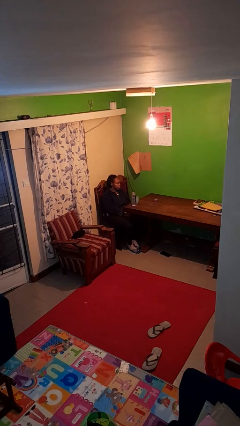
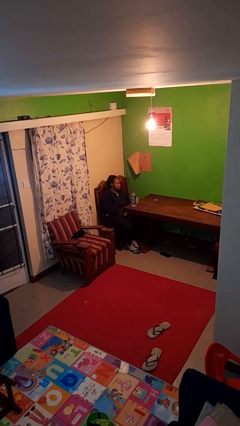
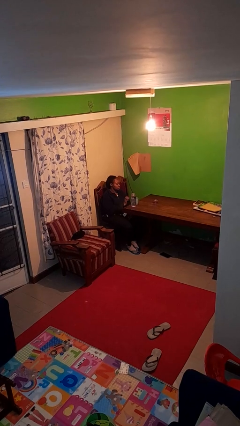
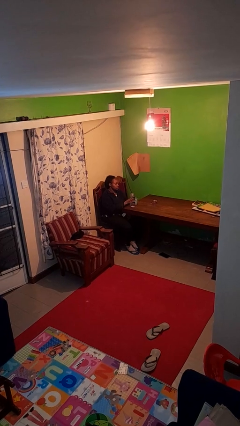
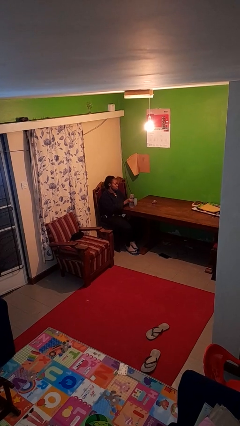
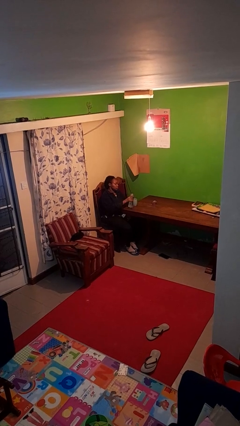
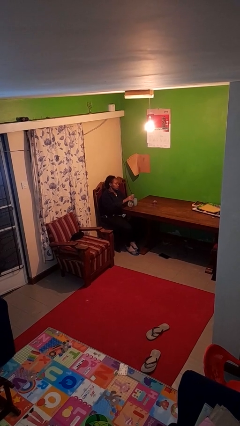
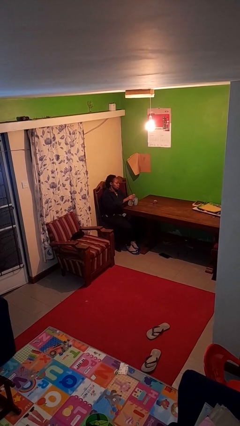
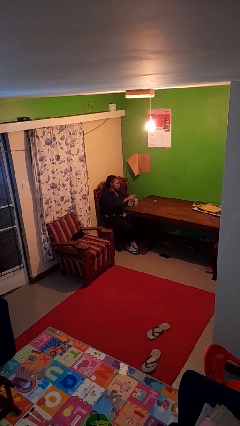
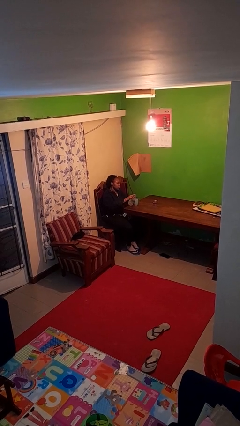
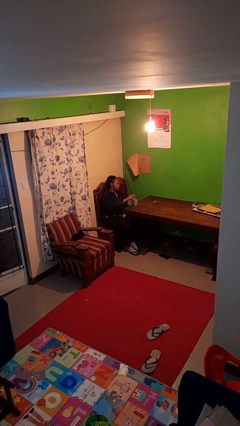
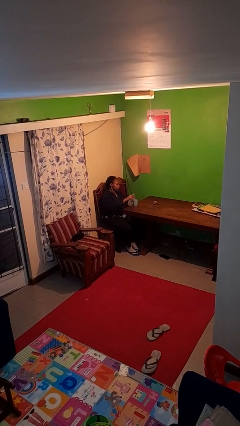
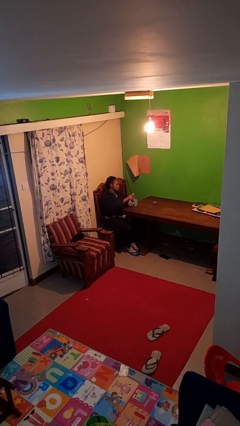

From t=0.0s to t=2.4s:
person pours liquid into cup

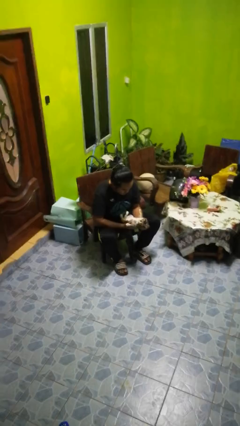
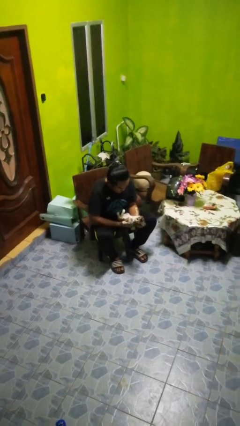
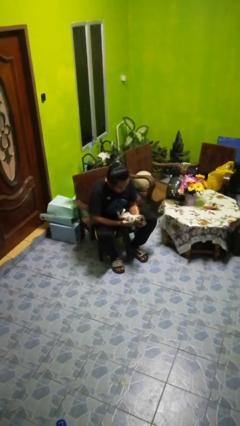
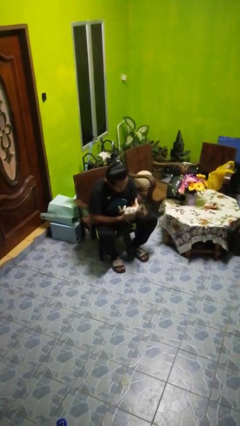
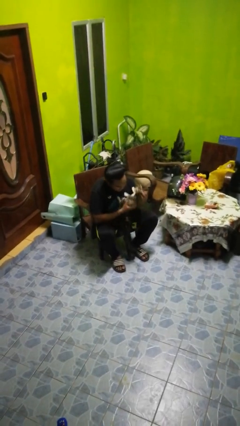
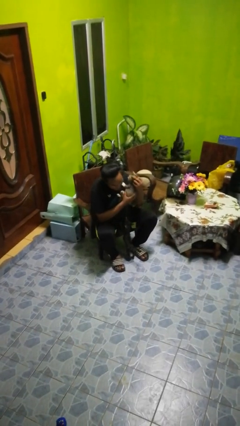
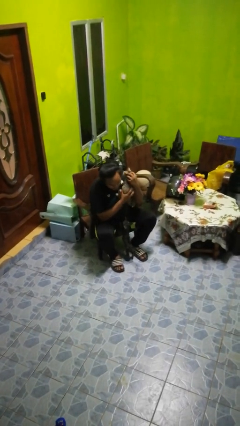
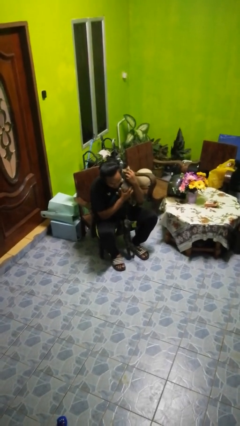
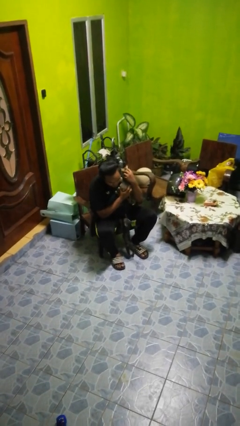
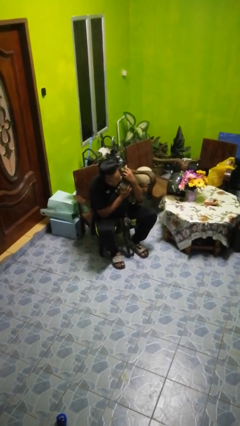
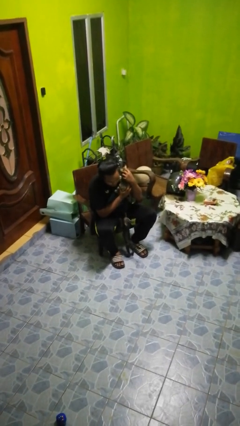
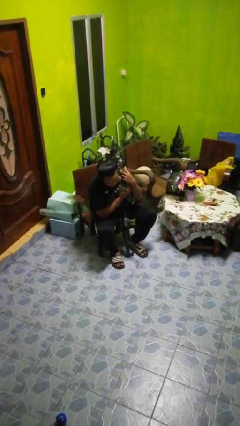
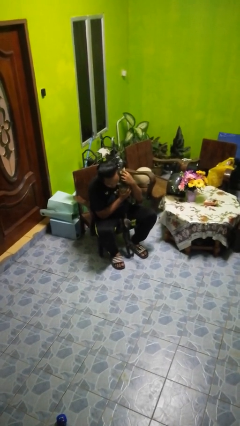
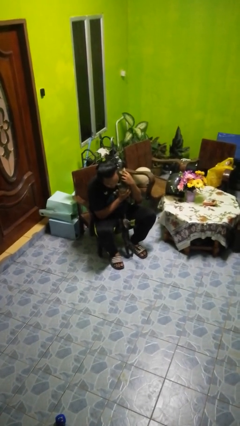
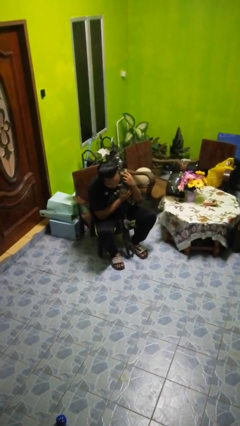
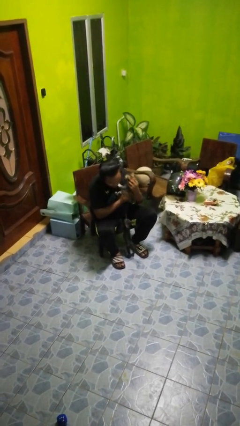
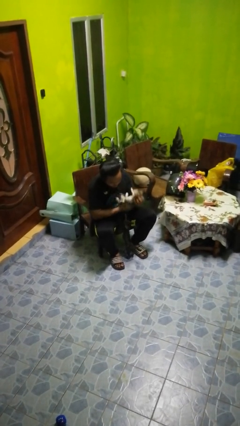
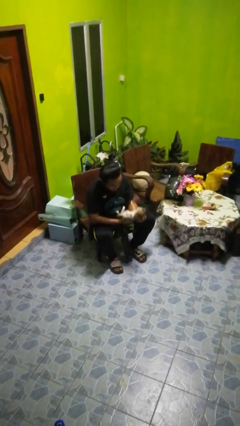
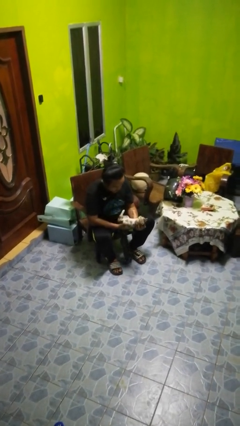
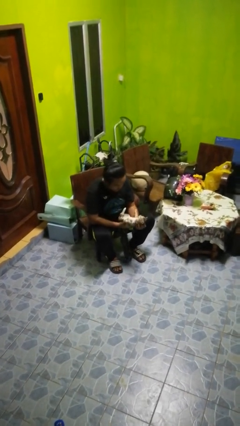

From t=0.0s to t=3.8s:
person hugs cat

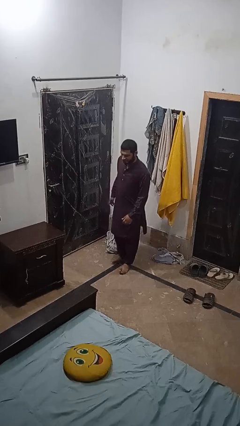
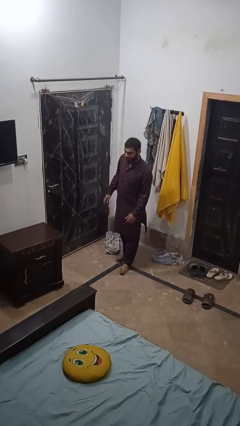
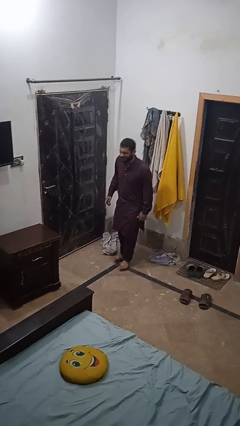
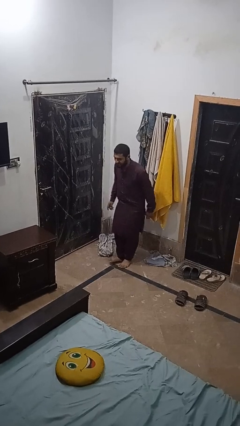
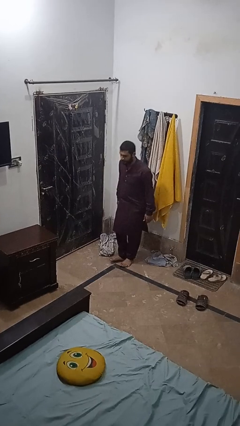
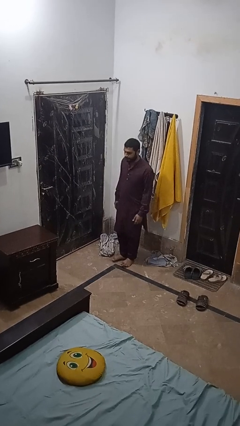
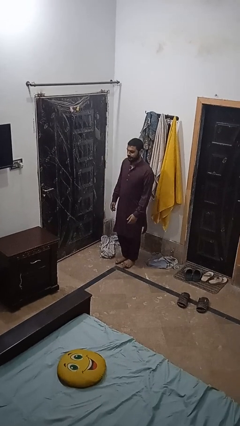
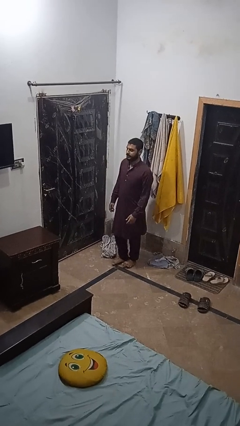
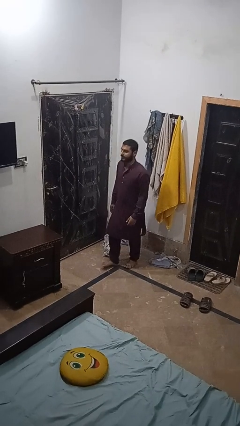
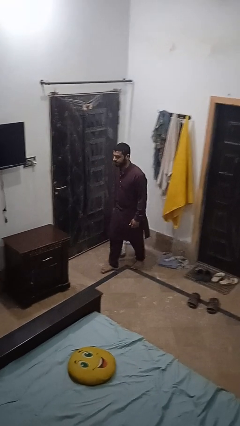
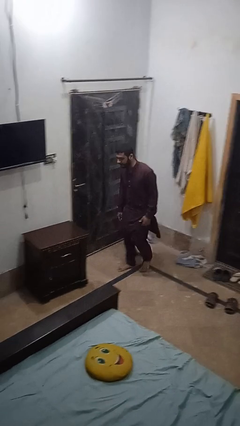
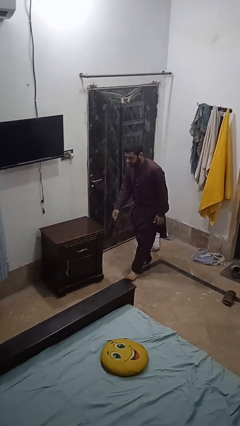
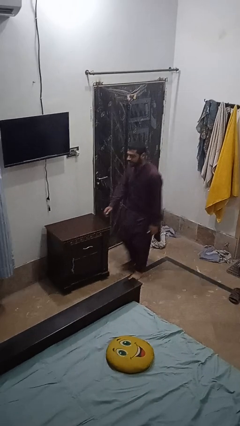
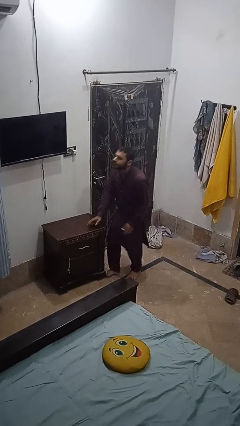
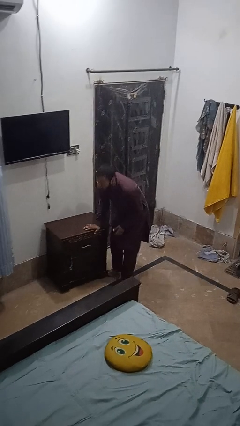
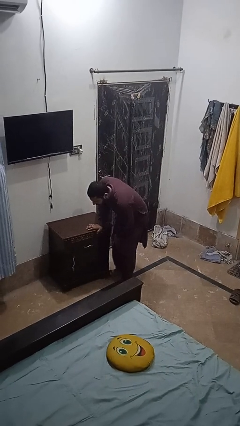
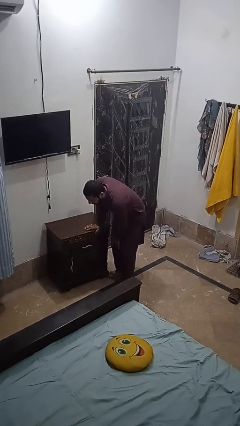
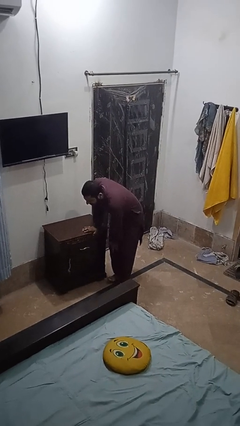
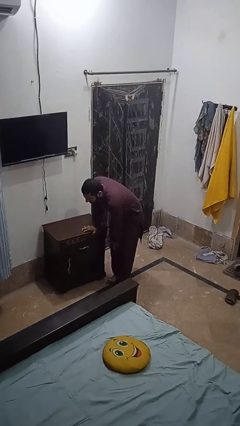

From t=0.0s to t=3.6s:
person stubs toe

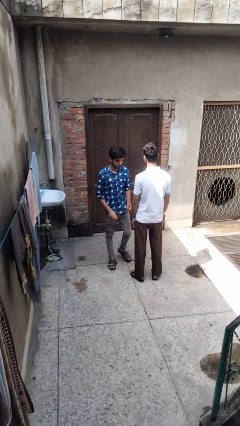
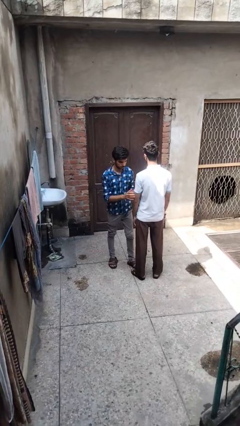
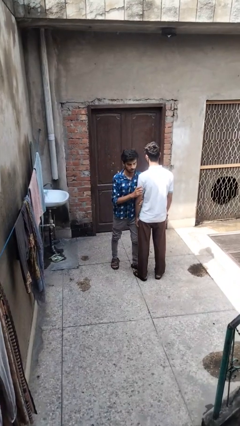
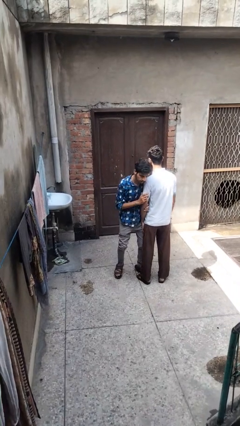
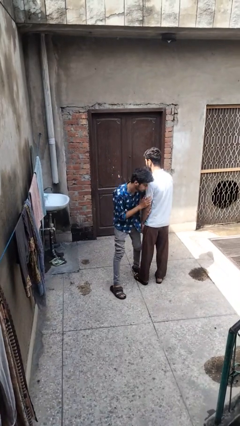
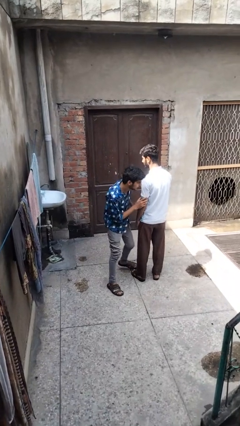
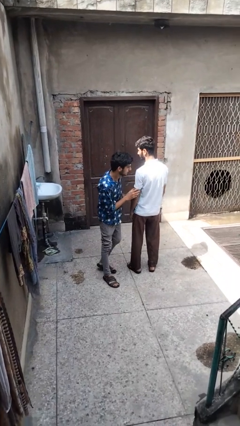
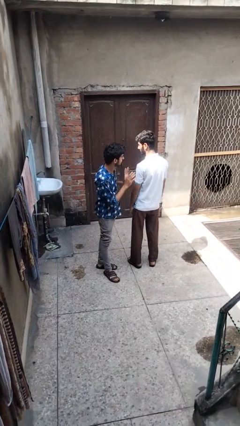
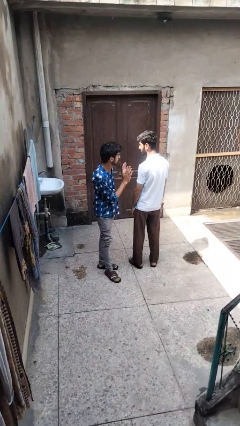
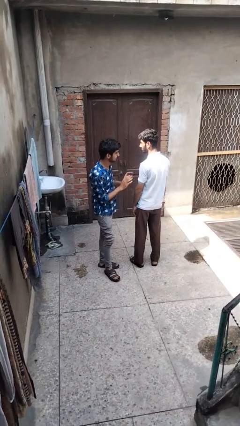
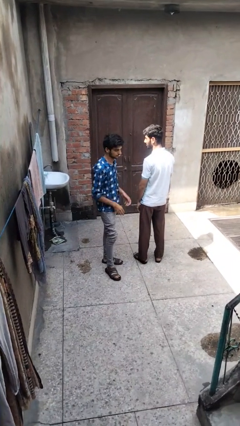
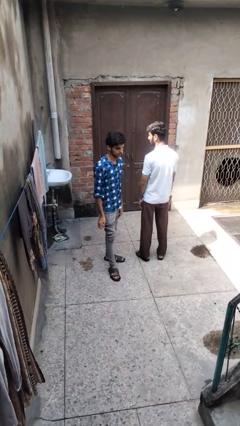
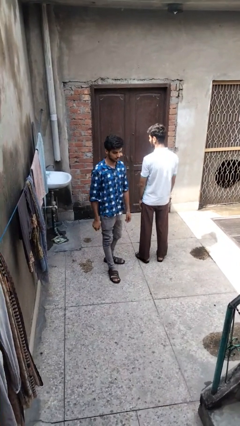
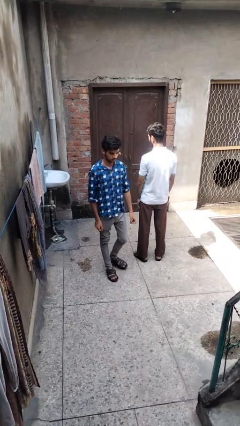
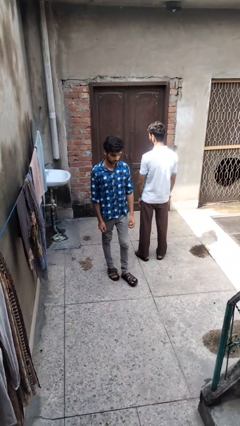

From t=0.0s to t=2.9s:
person bumps into person

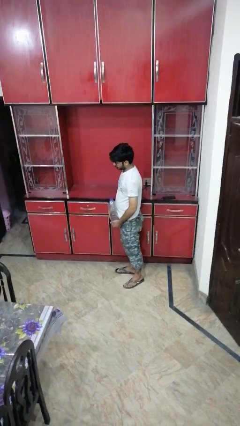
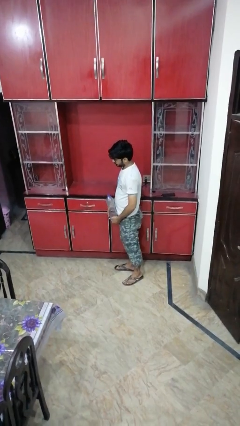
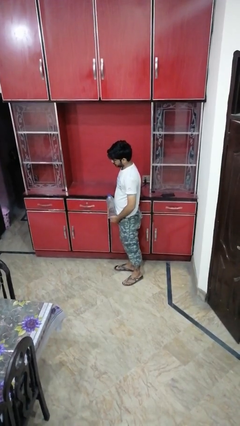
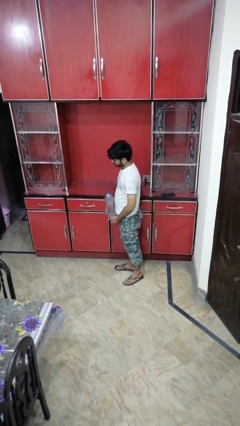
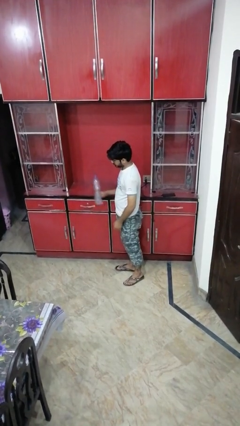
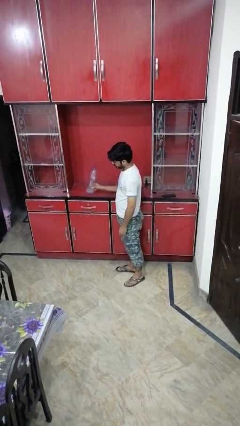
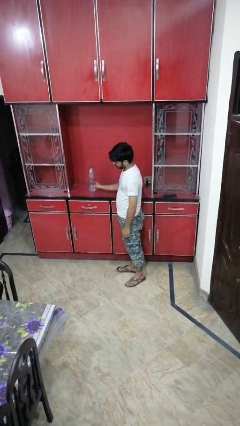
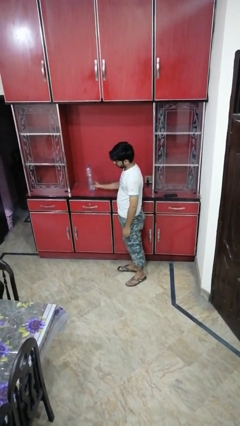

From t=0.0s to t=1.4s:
person puts down object on countertop

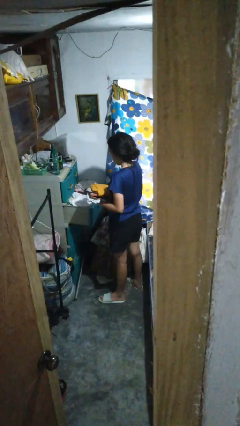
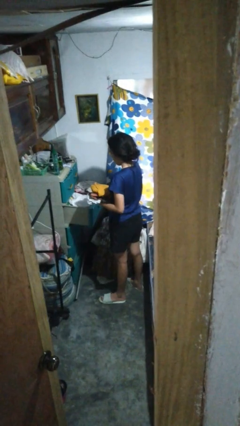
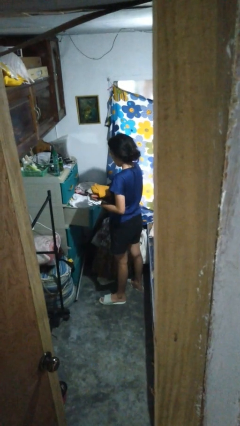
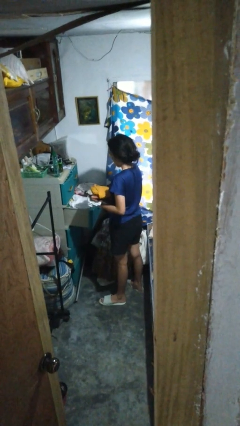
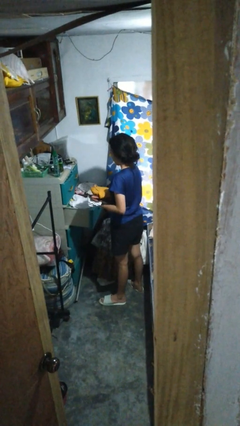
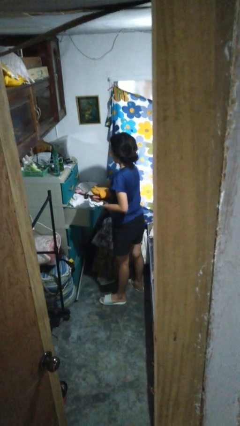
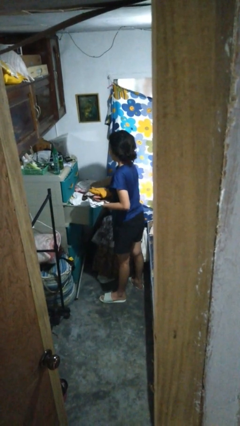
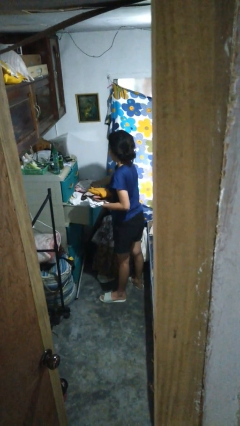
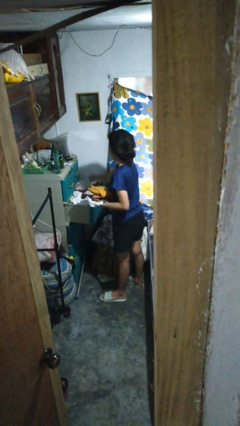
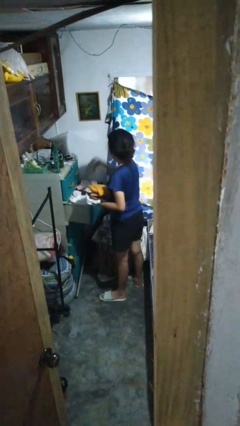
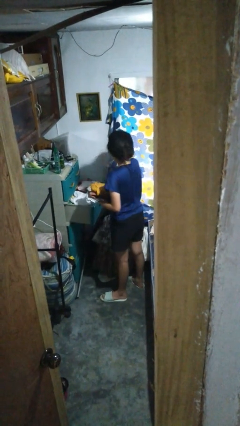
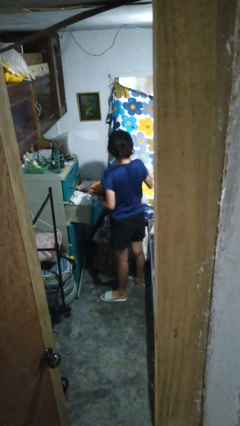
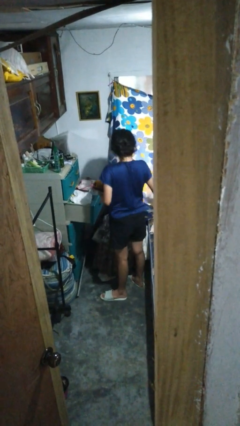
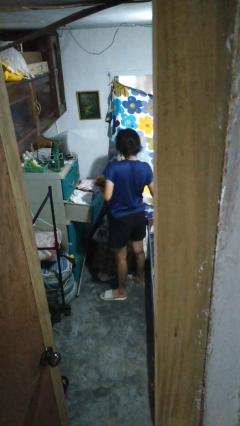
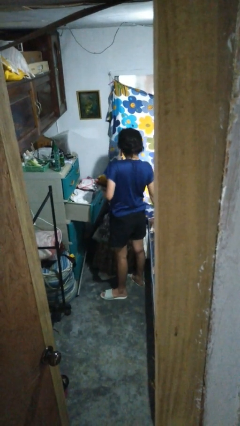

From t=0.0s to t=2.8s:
person takes clothes from dresser

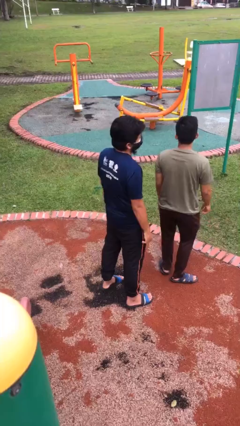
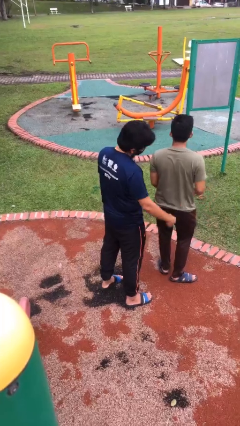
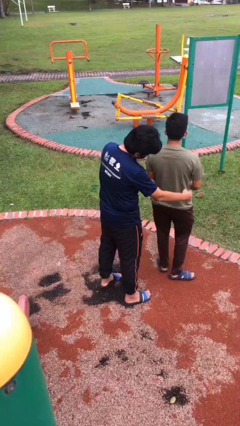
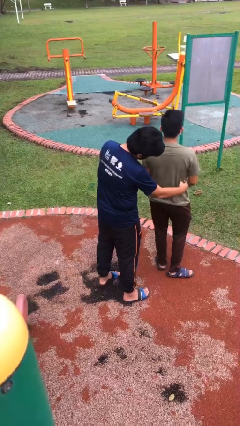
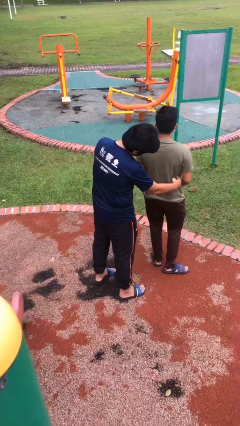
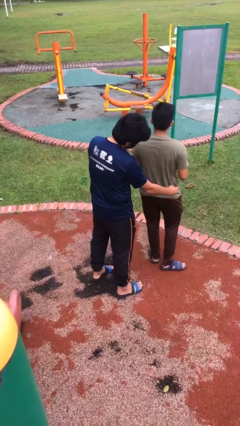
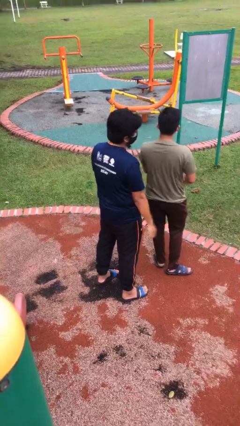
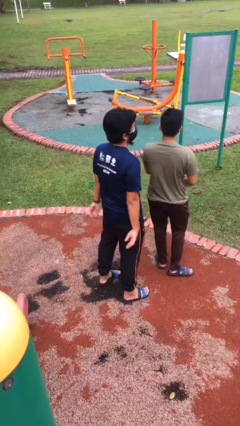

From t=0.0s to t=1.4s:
person tickles person
